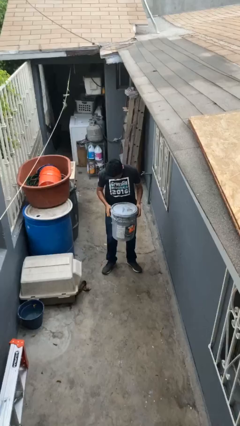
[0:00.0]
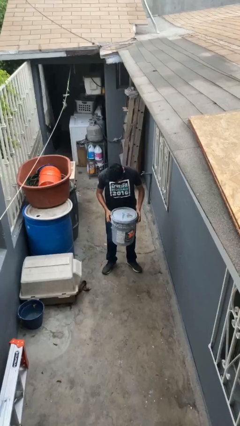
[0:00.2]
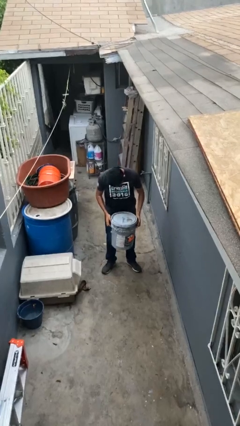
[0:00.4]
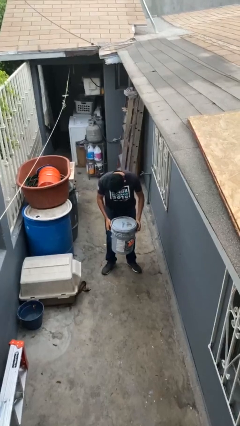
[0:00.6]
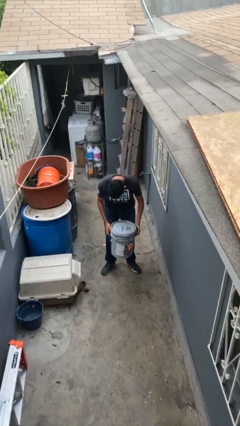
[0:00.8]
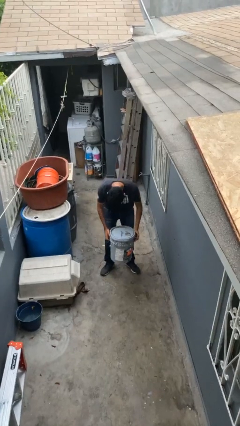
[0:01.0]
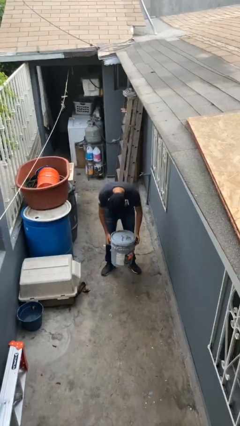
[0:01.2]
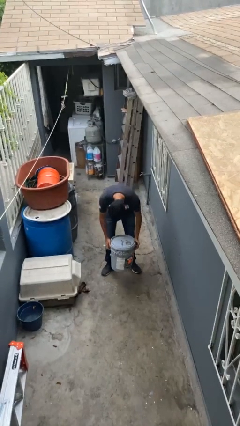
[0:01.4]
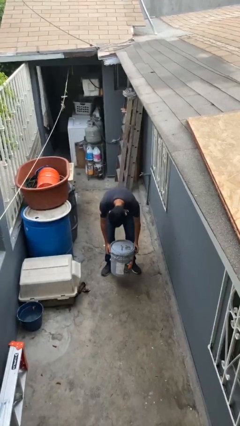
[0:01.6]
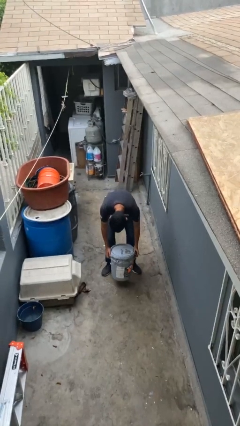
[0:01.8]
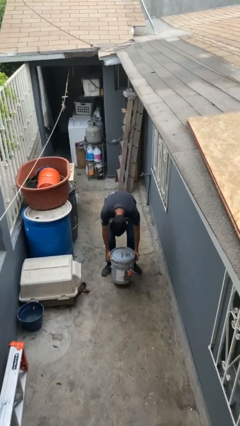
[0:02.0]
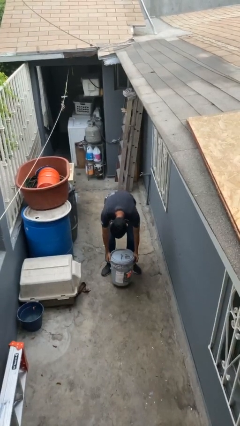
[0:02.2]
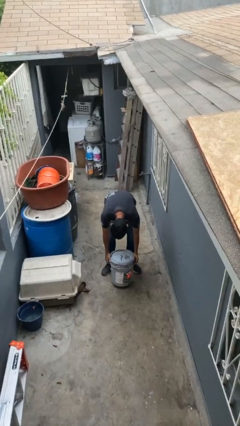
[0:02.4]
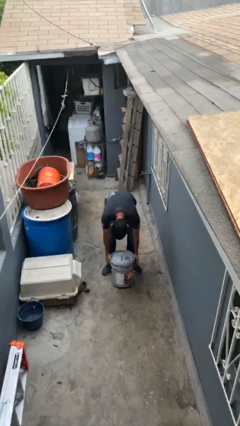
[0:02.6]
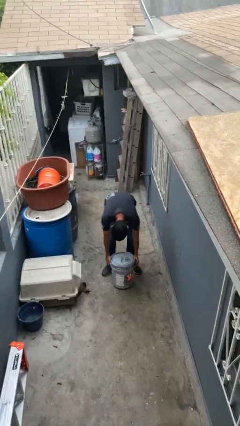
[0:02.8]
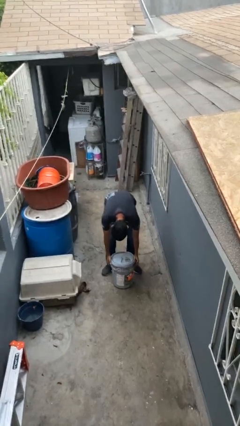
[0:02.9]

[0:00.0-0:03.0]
person puts down object on floor

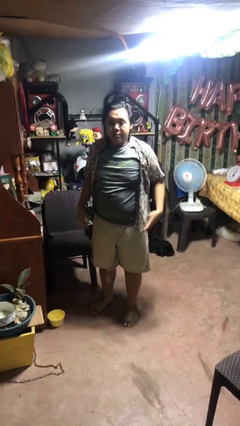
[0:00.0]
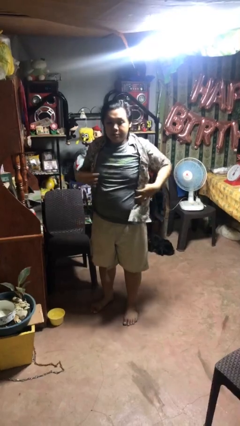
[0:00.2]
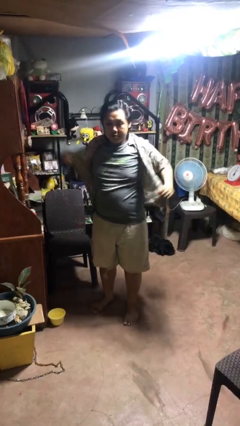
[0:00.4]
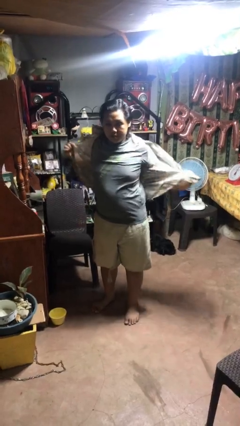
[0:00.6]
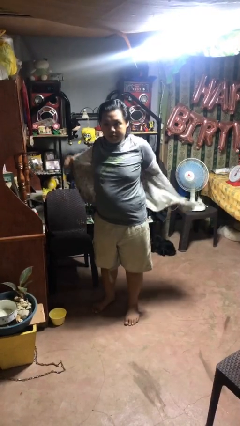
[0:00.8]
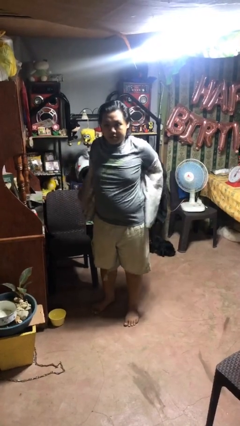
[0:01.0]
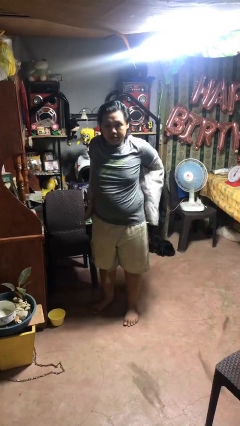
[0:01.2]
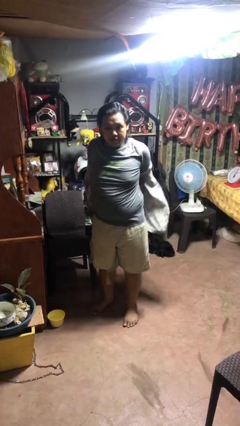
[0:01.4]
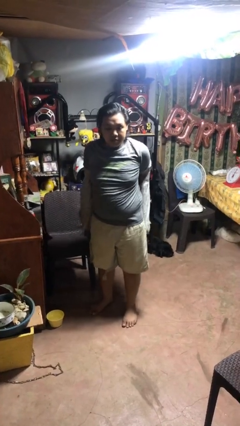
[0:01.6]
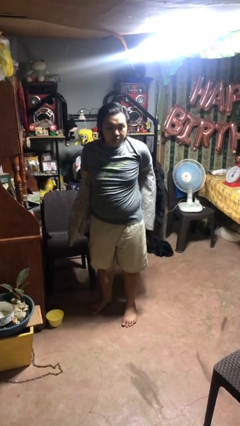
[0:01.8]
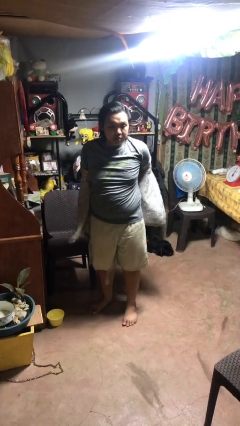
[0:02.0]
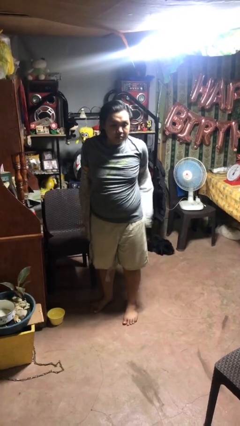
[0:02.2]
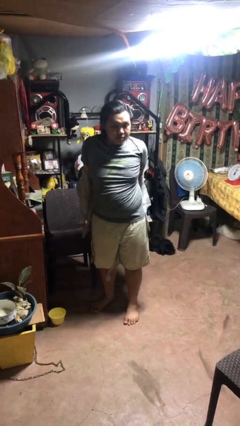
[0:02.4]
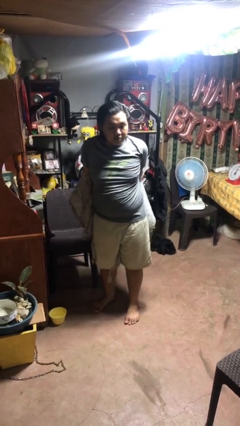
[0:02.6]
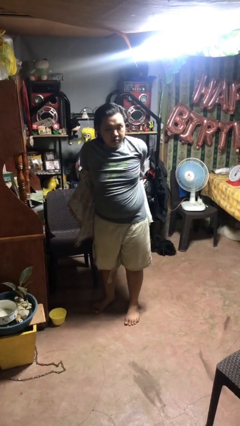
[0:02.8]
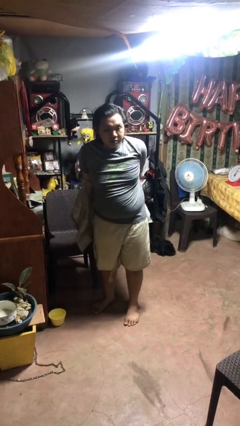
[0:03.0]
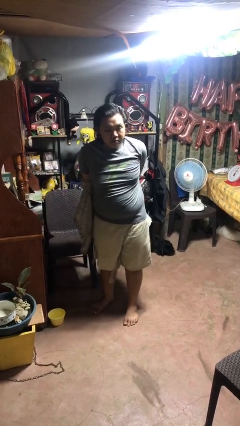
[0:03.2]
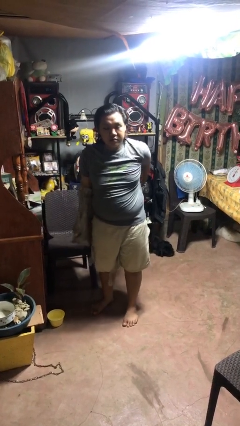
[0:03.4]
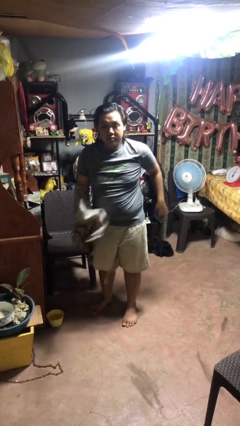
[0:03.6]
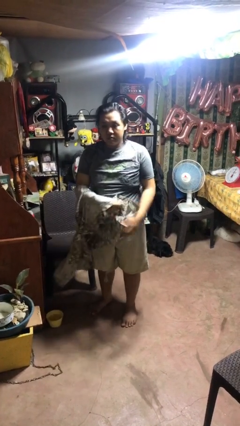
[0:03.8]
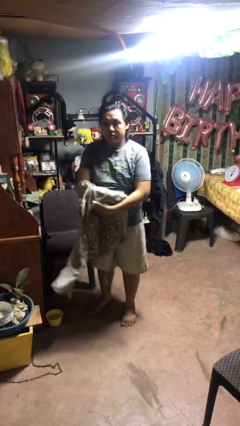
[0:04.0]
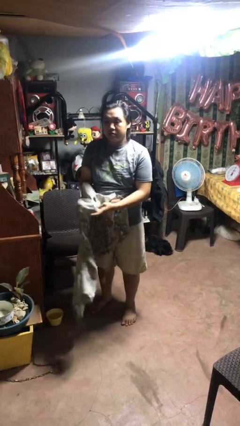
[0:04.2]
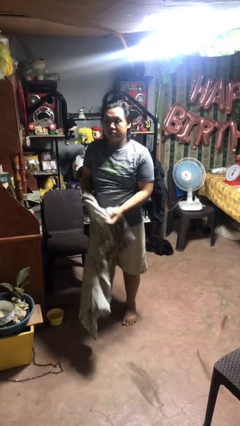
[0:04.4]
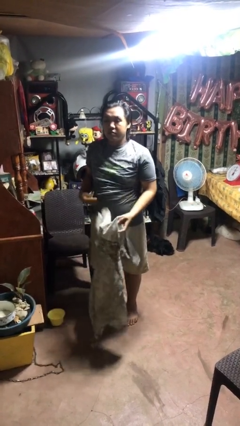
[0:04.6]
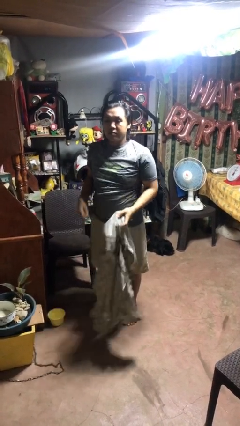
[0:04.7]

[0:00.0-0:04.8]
person takes off shirt

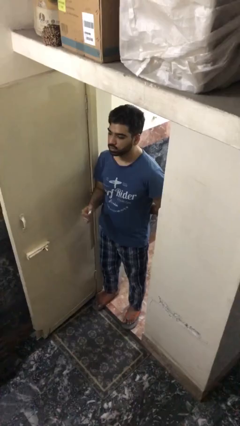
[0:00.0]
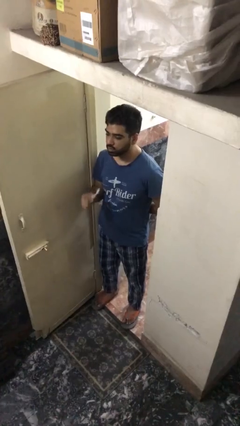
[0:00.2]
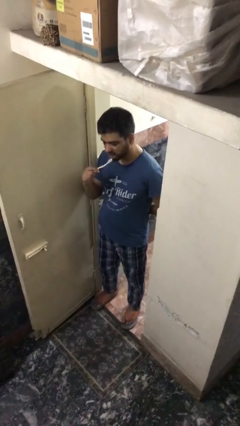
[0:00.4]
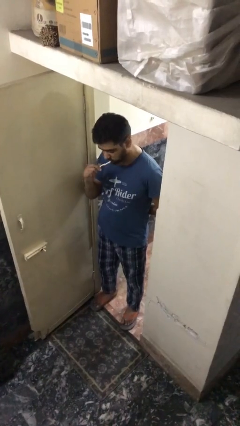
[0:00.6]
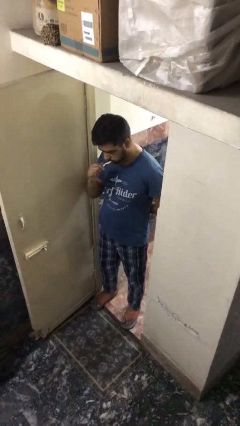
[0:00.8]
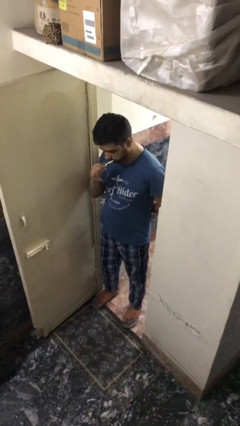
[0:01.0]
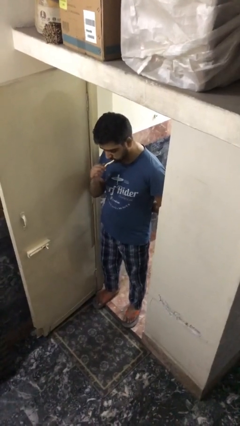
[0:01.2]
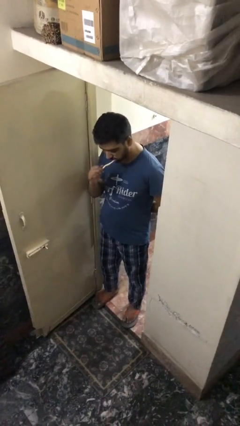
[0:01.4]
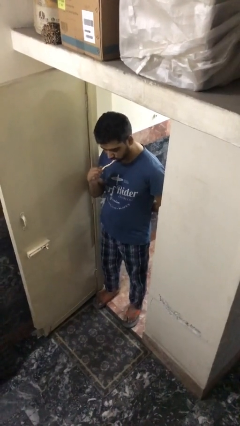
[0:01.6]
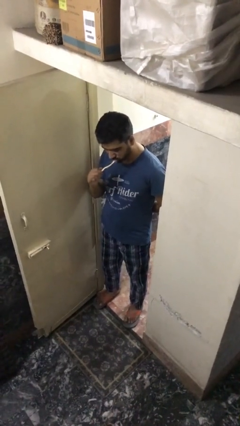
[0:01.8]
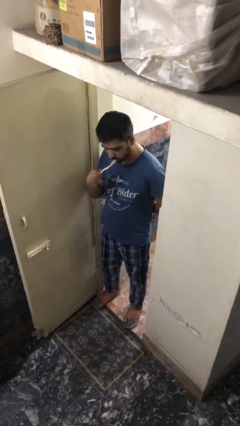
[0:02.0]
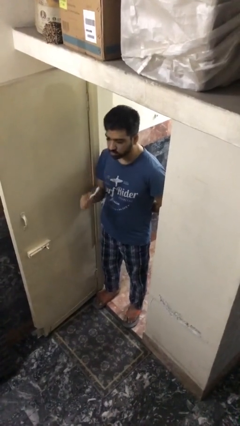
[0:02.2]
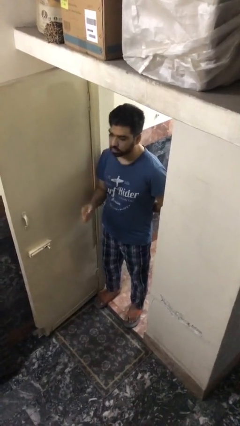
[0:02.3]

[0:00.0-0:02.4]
person brushes teeth

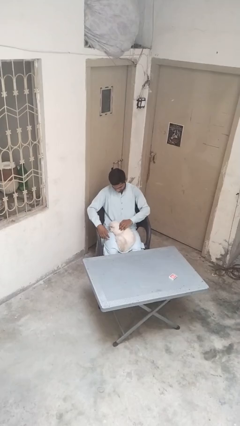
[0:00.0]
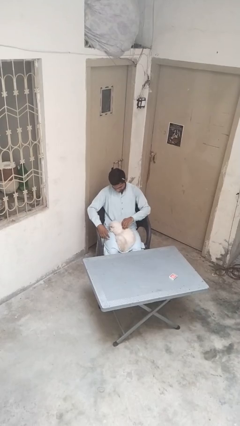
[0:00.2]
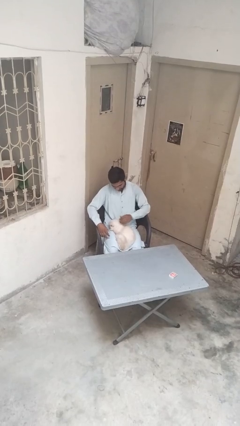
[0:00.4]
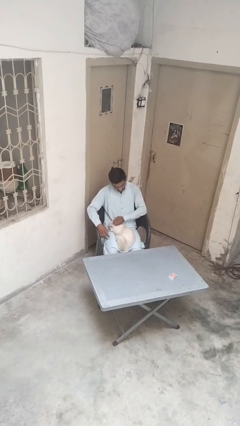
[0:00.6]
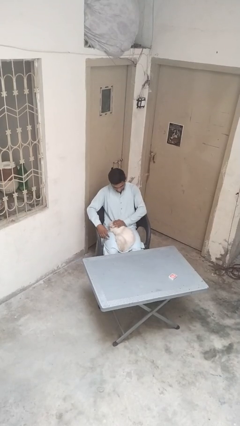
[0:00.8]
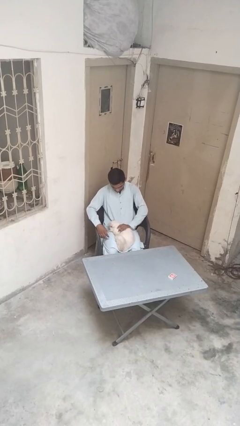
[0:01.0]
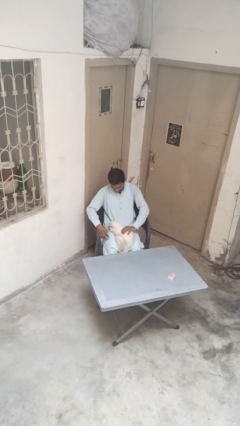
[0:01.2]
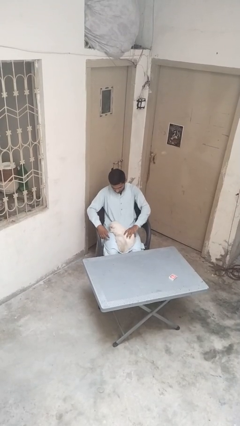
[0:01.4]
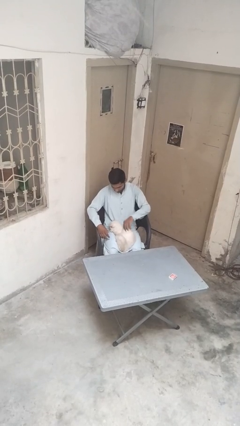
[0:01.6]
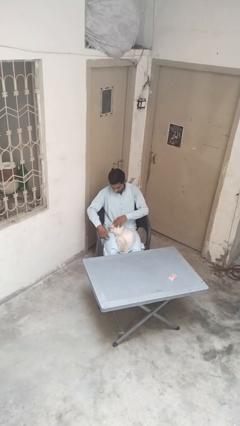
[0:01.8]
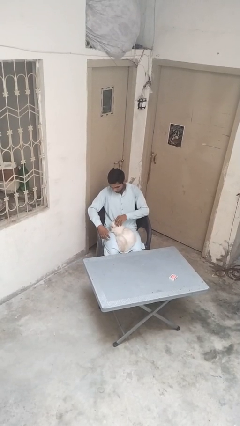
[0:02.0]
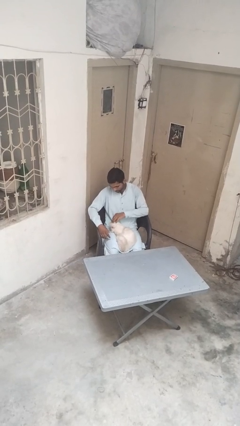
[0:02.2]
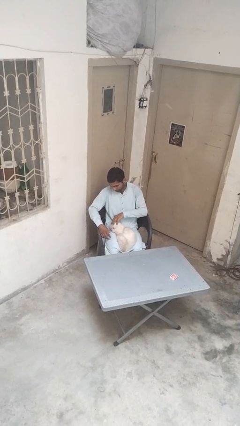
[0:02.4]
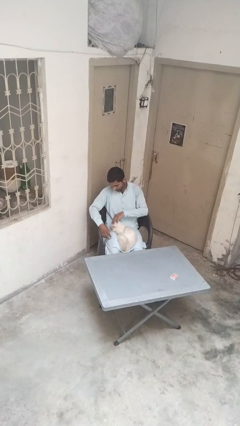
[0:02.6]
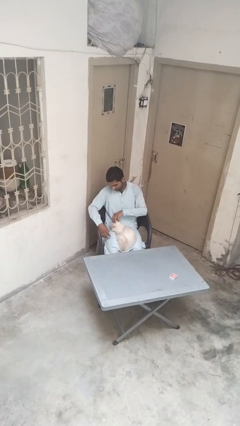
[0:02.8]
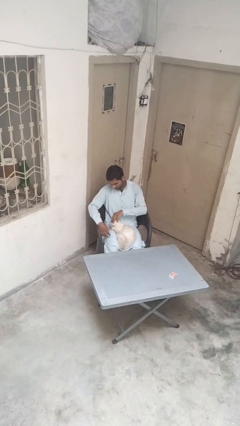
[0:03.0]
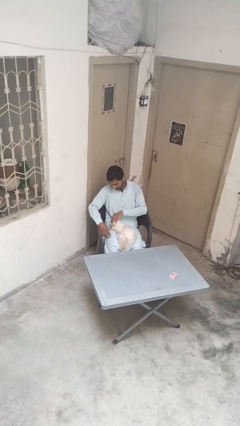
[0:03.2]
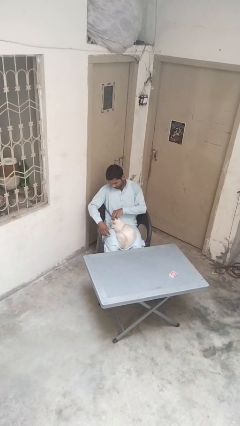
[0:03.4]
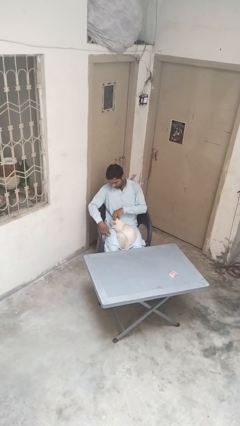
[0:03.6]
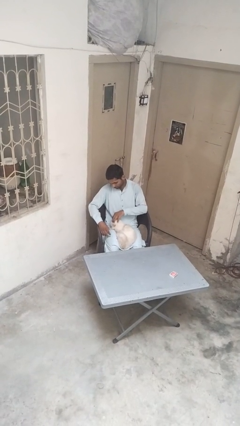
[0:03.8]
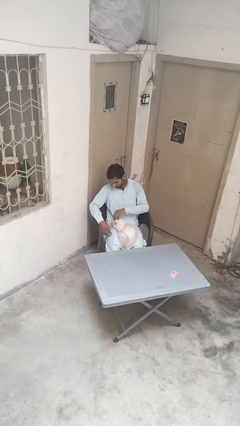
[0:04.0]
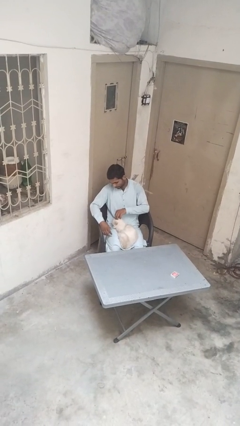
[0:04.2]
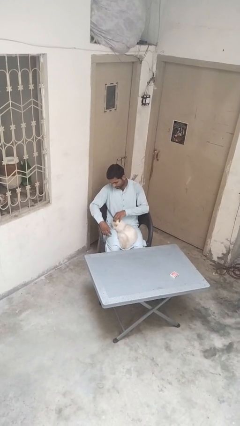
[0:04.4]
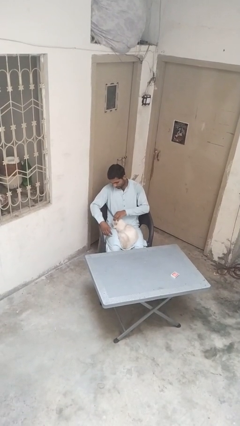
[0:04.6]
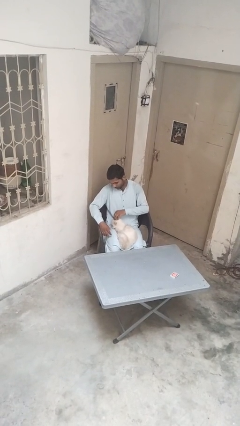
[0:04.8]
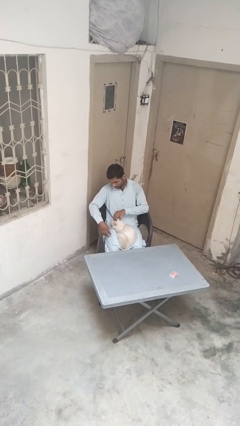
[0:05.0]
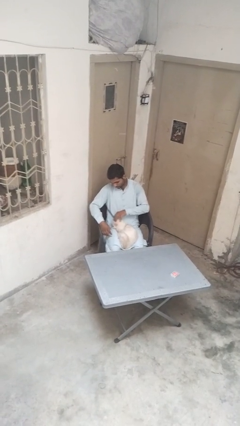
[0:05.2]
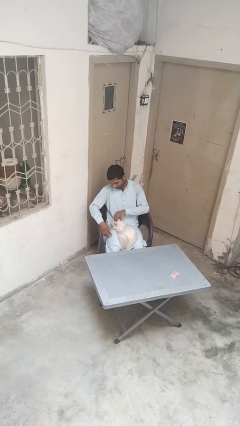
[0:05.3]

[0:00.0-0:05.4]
person pets cat

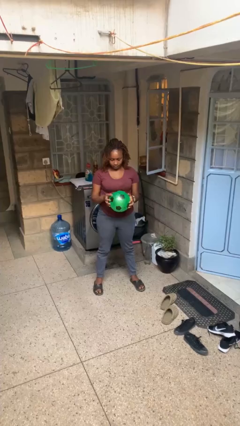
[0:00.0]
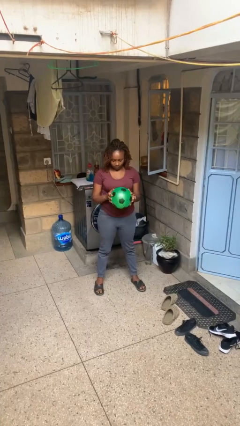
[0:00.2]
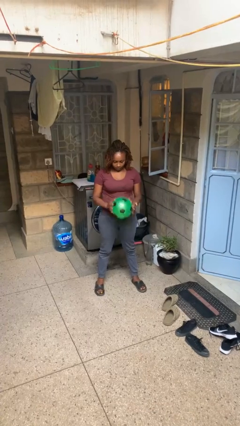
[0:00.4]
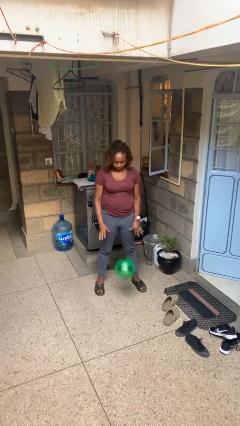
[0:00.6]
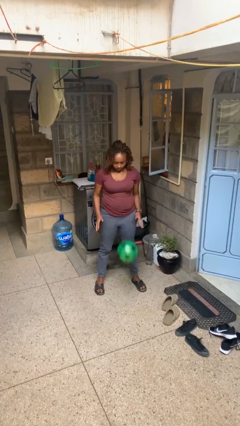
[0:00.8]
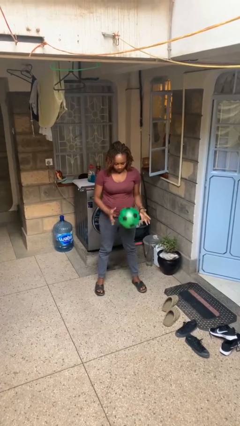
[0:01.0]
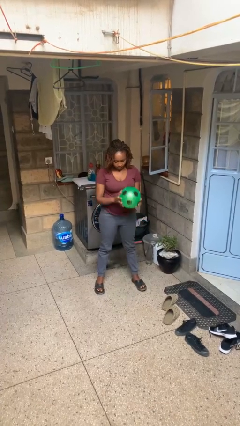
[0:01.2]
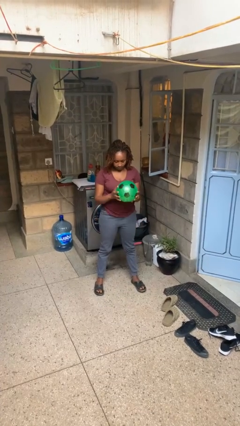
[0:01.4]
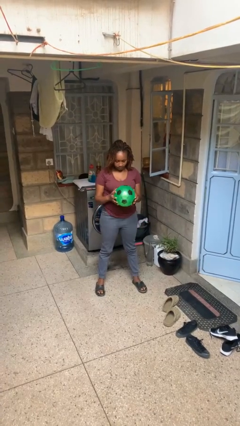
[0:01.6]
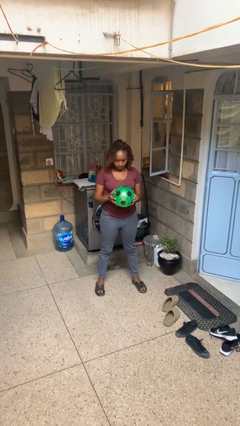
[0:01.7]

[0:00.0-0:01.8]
person bounces ball on floor

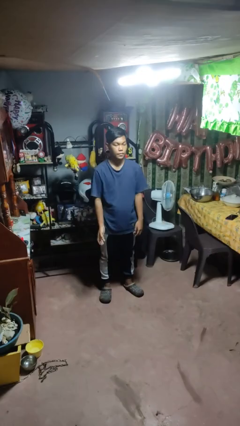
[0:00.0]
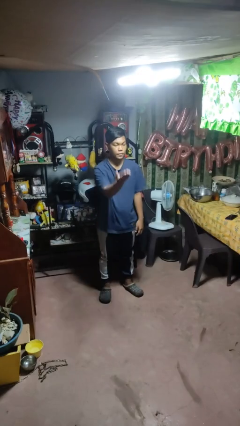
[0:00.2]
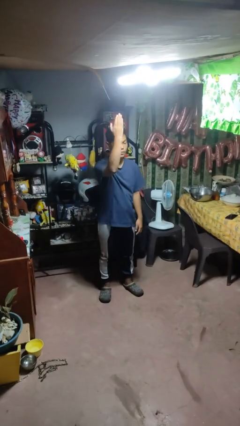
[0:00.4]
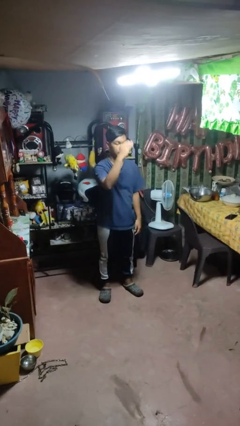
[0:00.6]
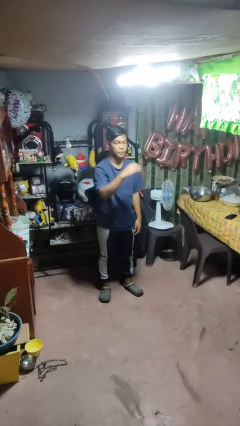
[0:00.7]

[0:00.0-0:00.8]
person gestures swipe up
